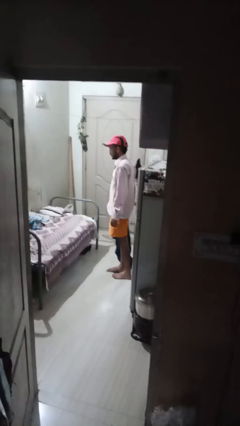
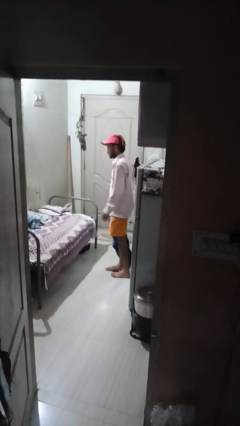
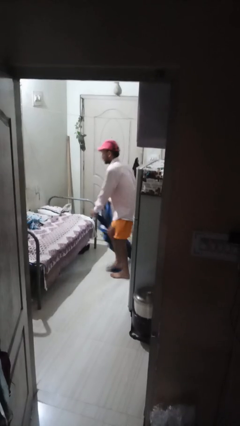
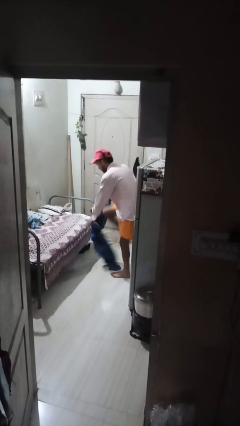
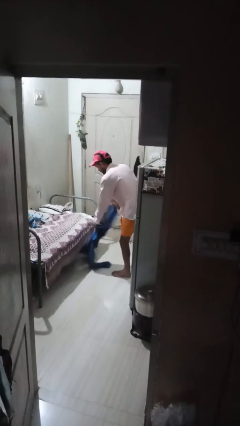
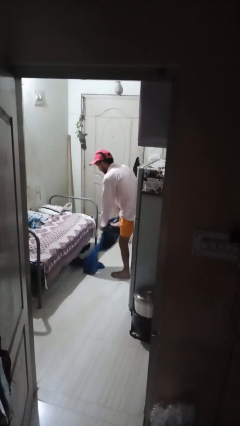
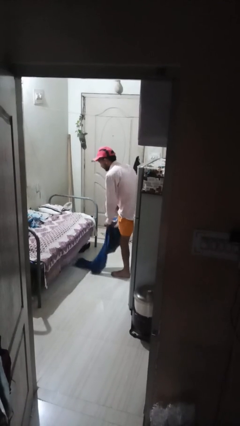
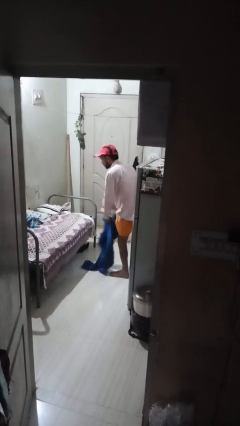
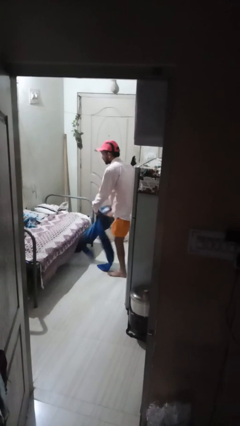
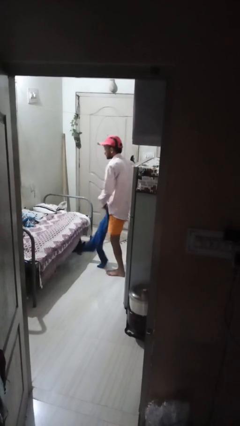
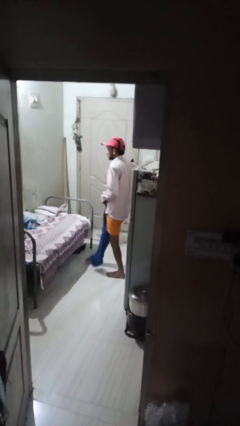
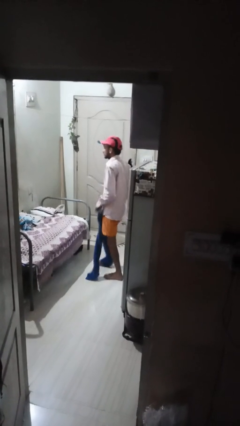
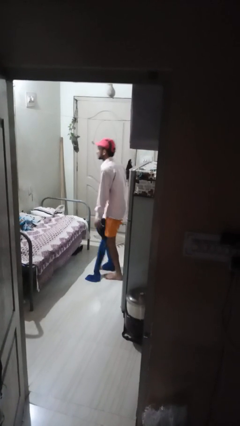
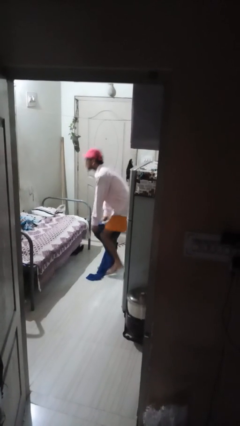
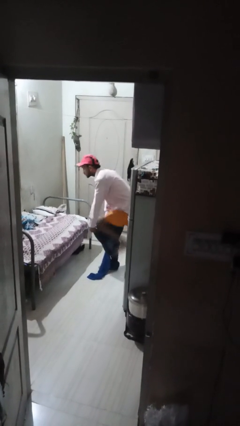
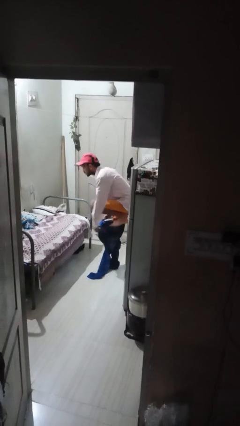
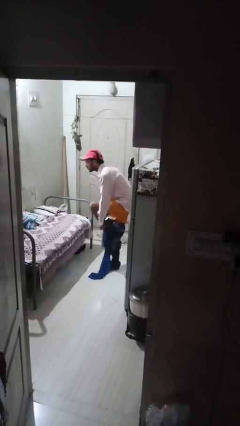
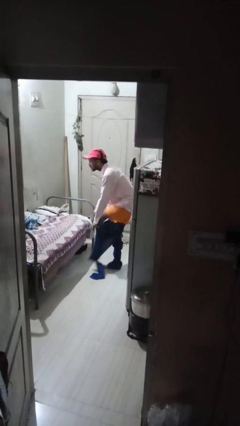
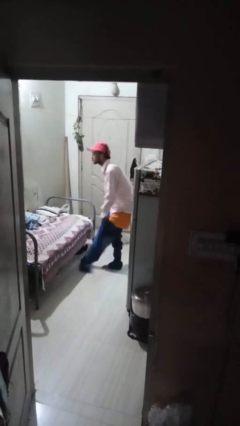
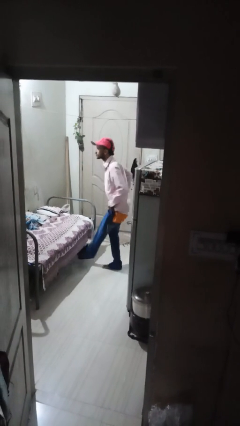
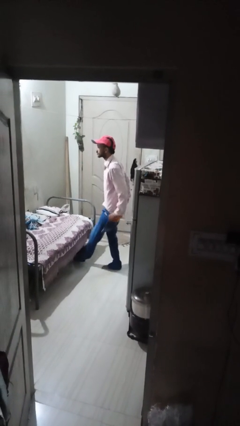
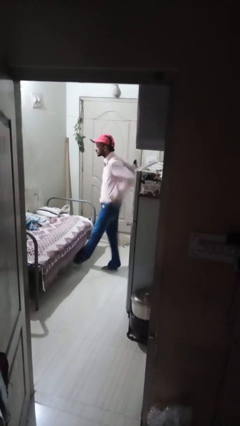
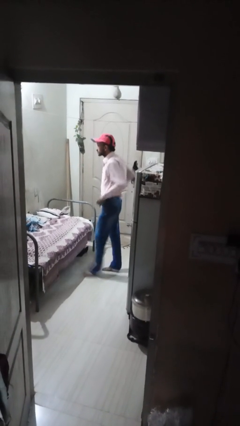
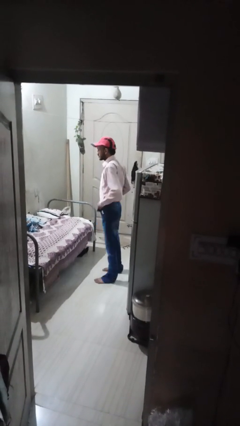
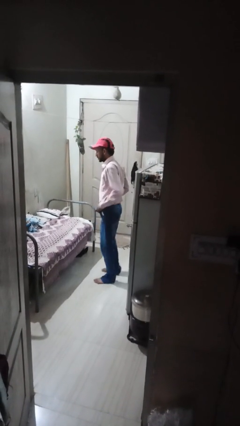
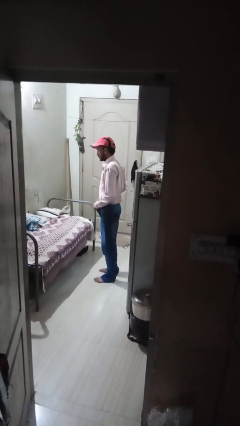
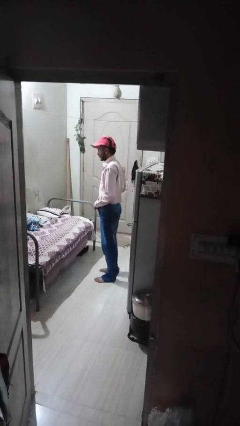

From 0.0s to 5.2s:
person puts on pants

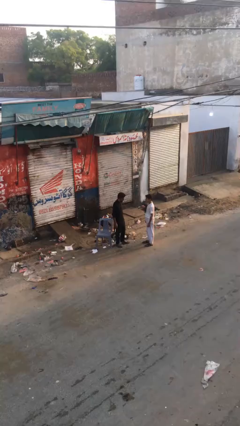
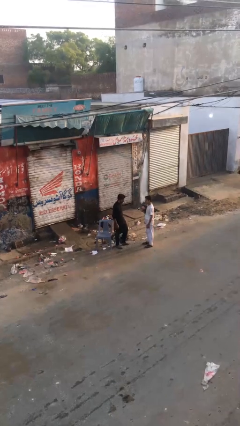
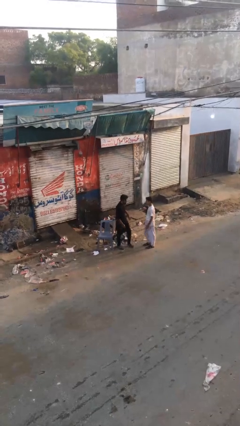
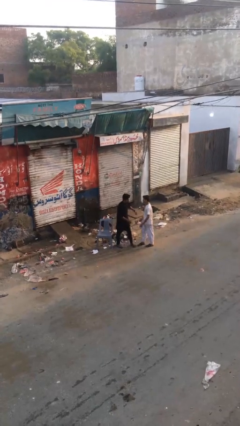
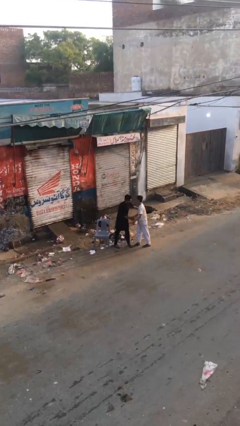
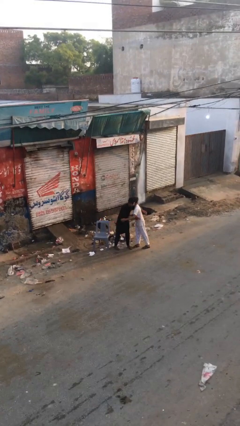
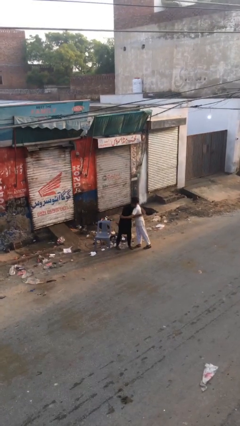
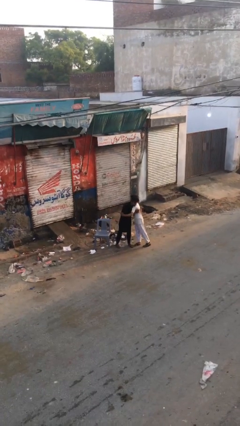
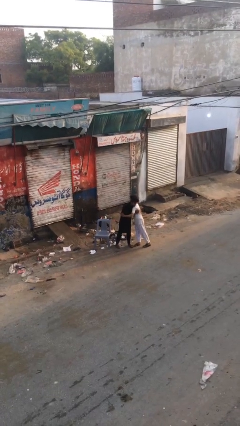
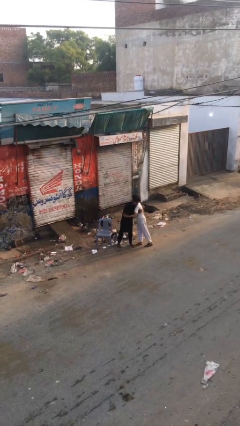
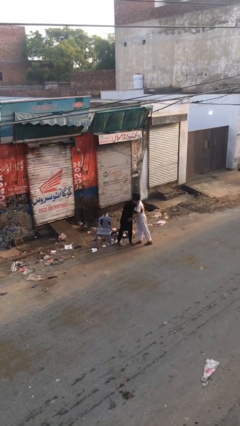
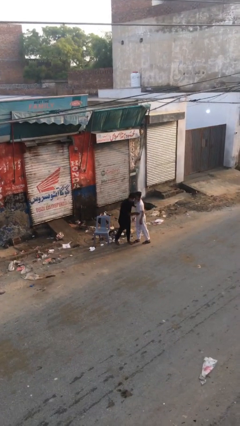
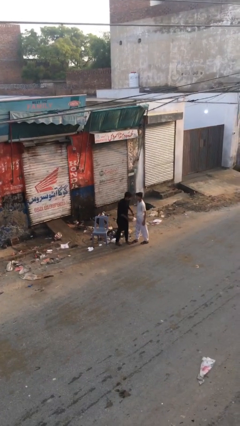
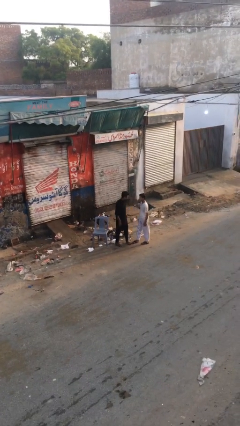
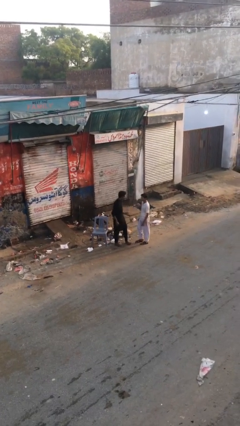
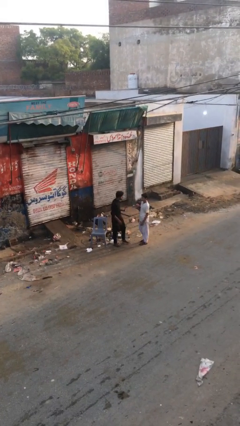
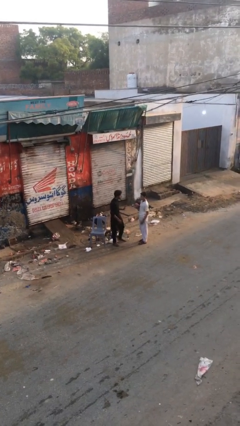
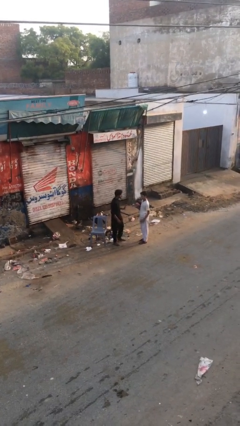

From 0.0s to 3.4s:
person embraces person

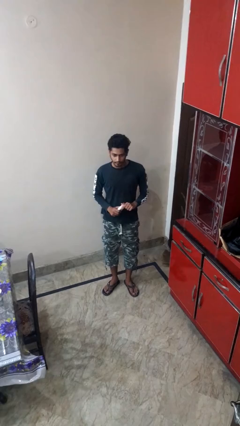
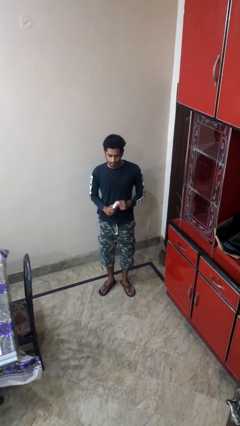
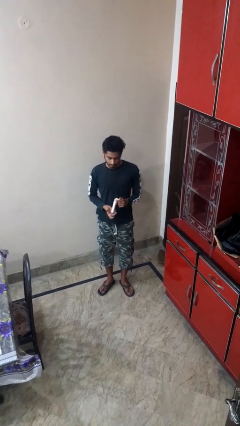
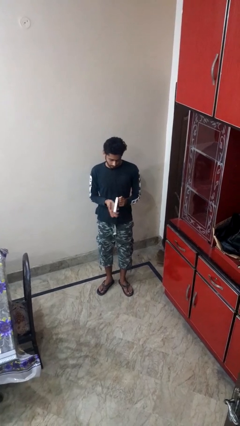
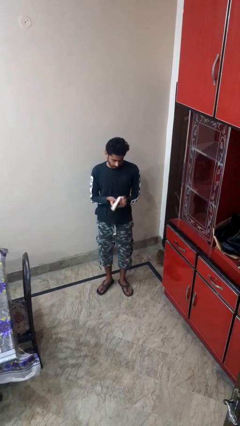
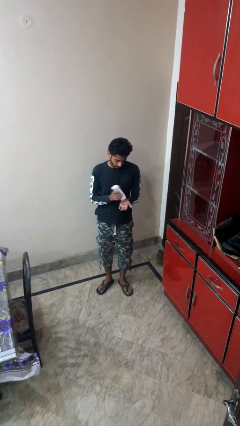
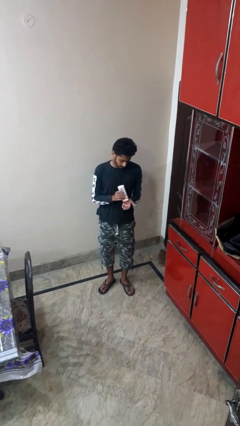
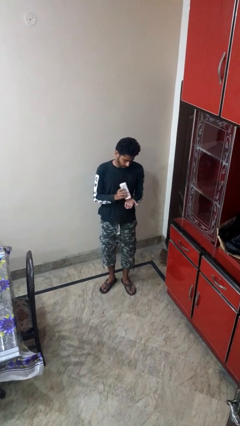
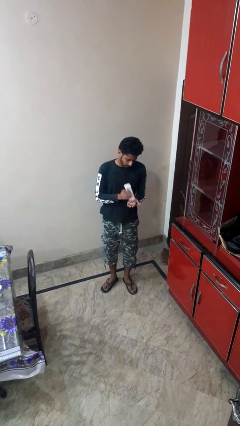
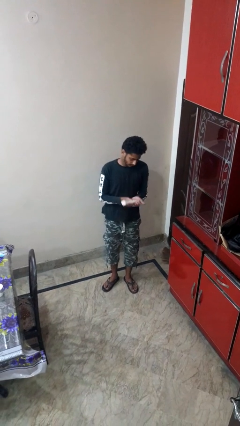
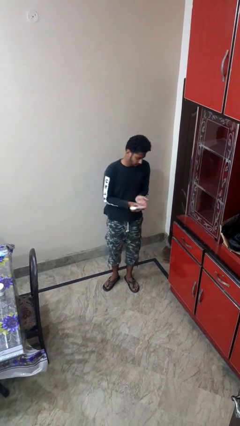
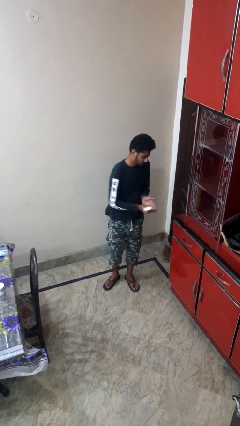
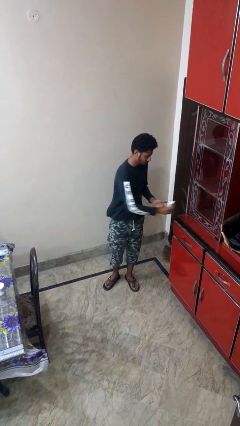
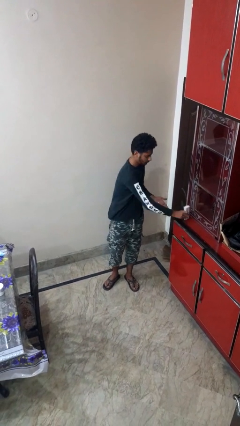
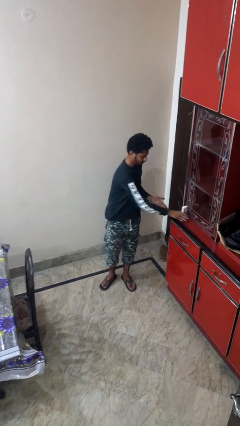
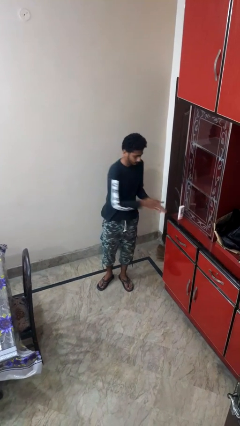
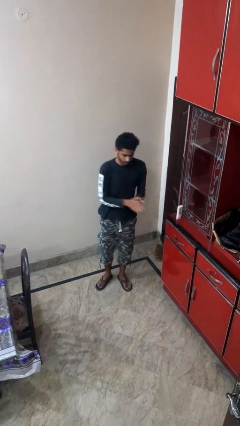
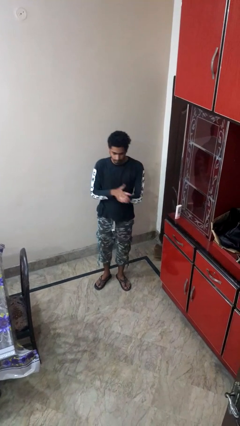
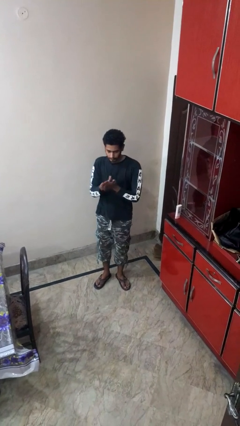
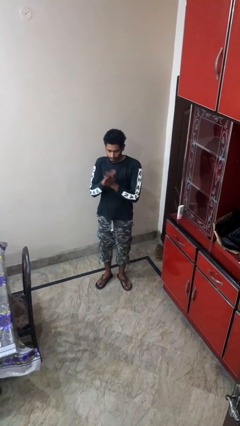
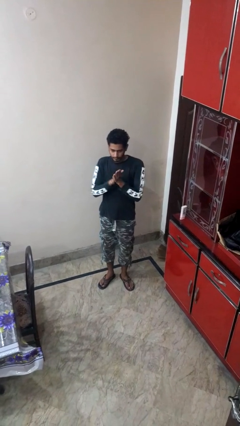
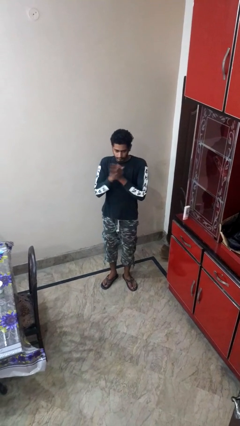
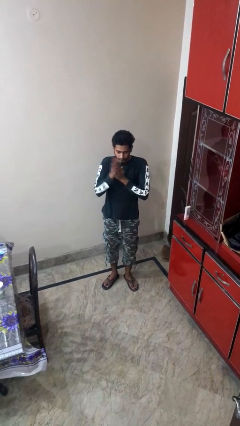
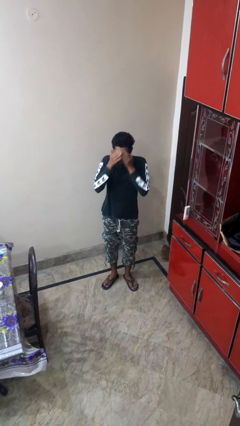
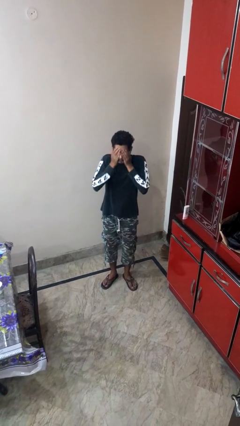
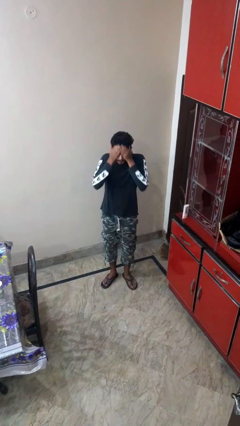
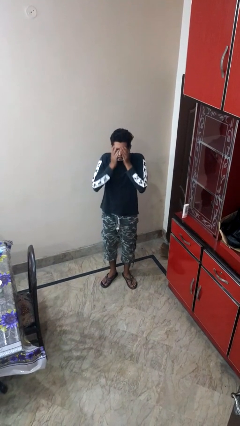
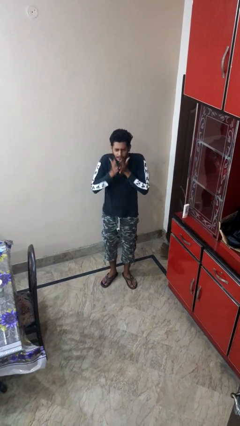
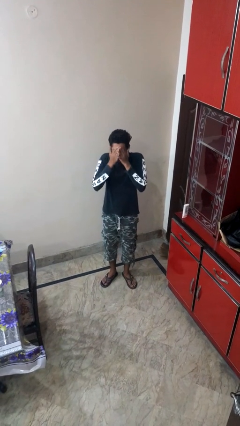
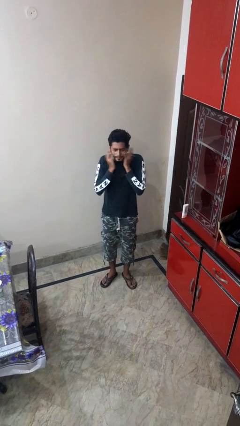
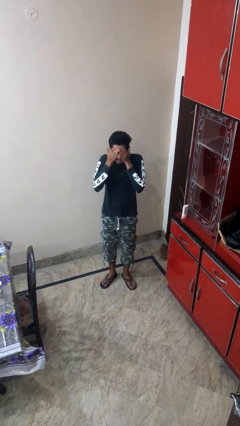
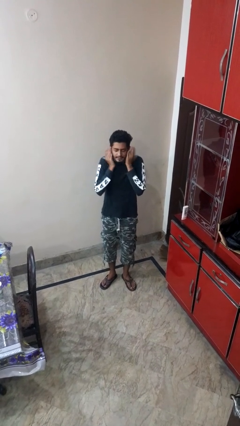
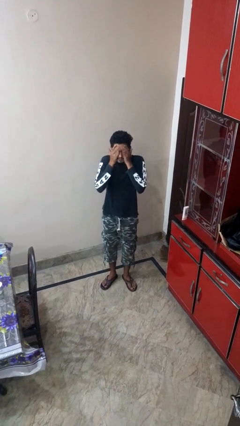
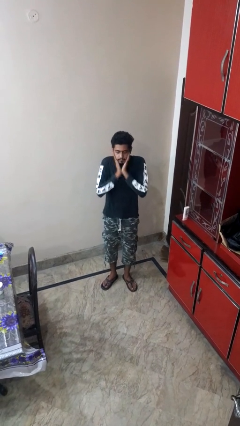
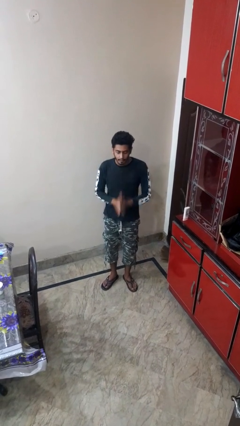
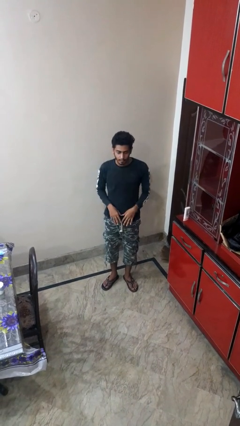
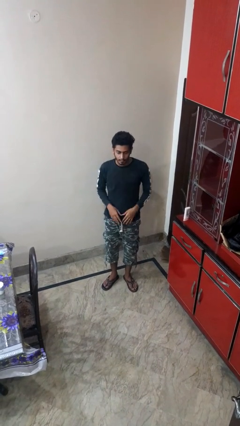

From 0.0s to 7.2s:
person applies facial moisturizer

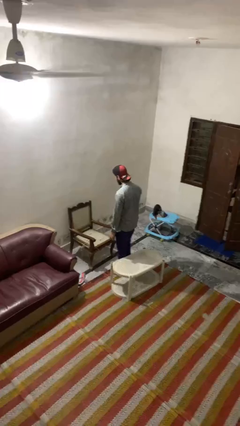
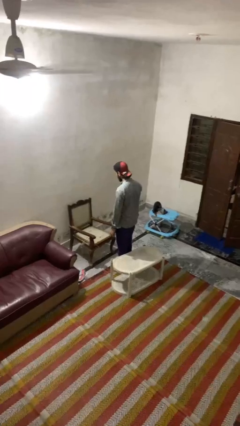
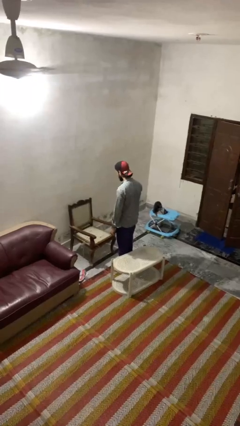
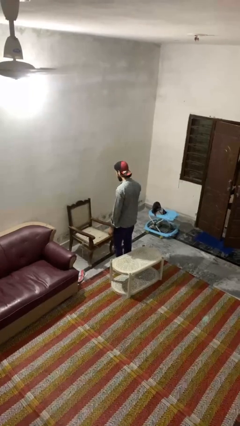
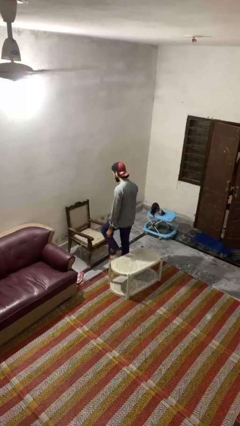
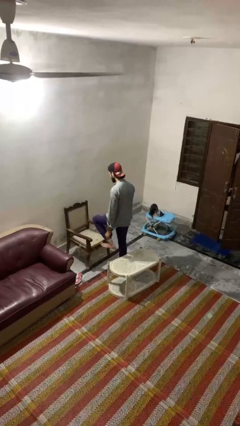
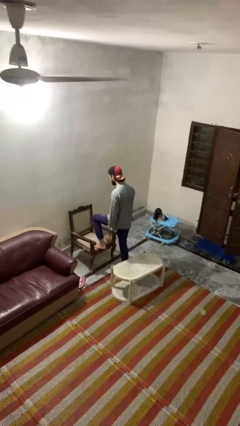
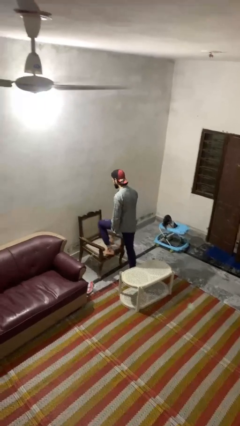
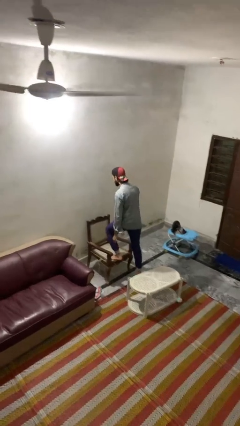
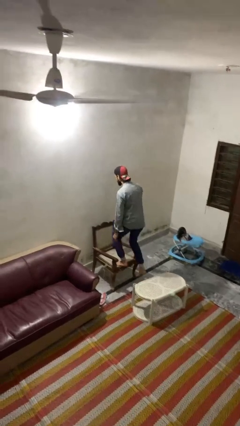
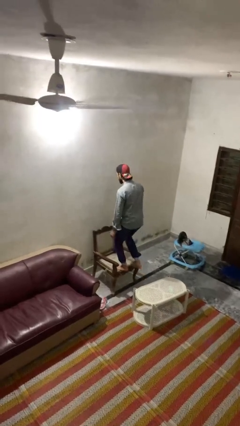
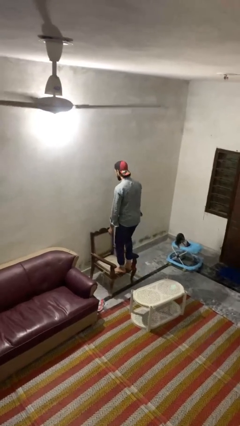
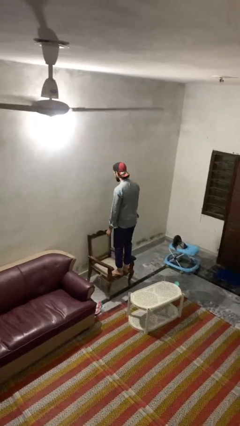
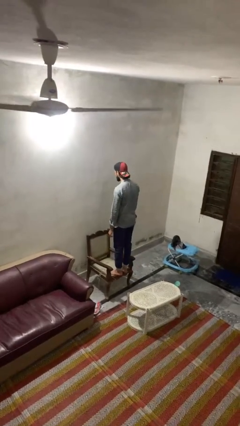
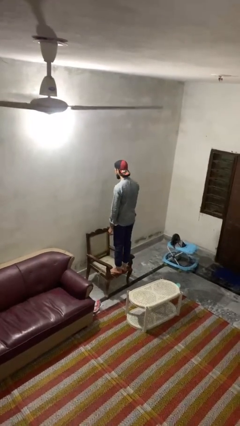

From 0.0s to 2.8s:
person climbs on chair
